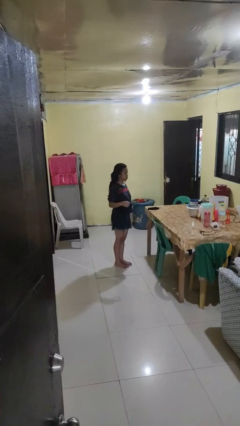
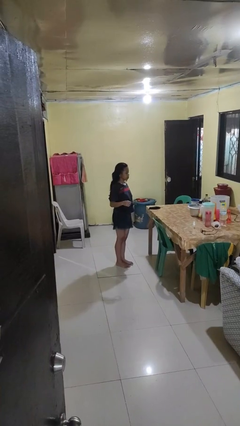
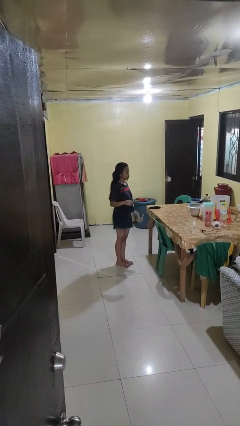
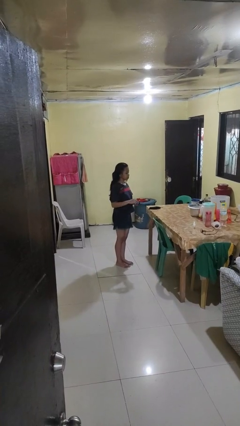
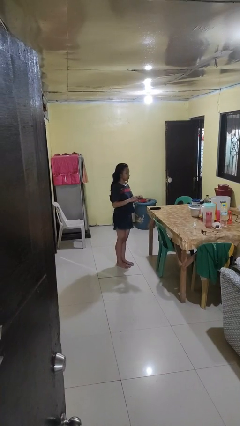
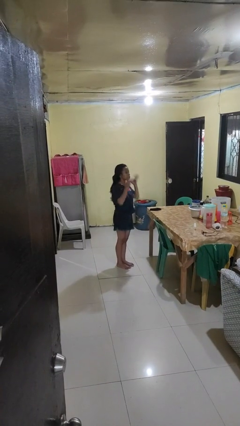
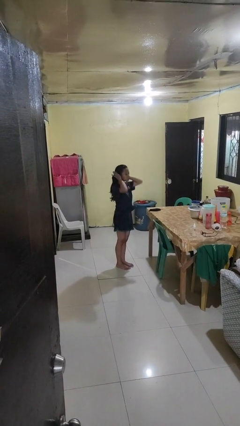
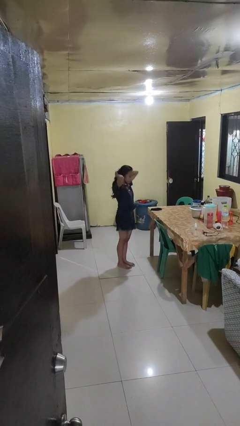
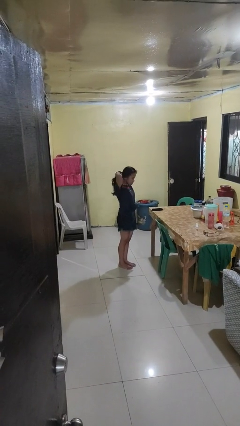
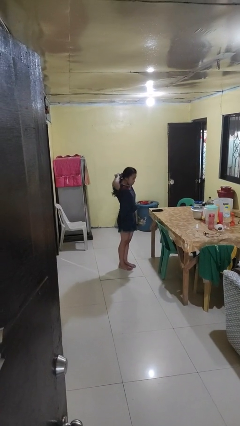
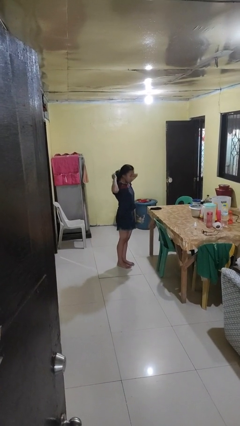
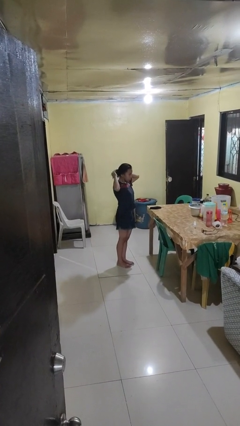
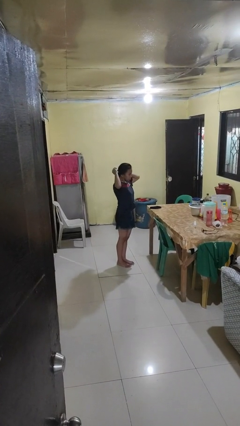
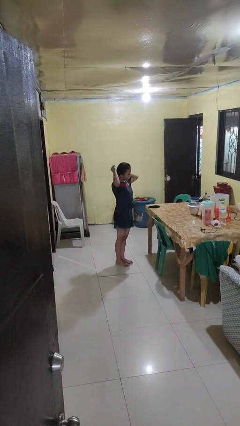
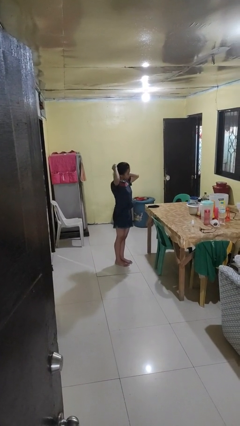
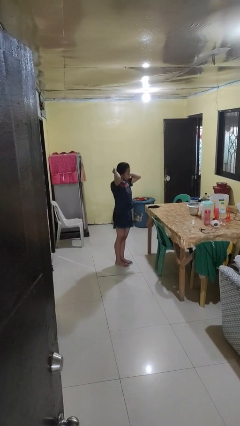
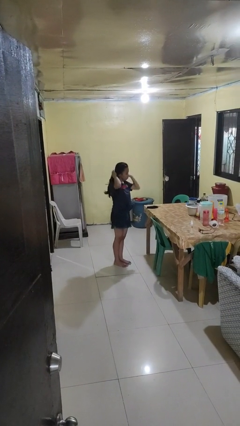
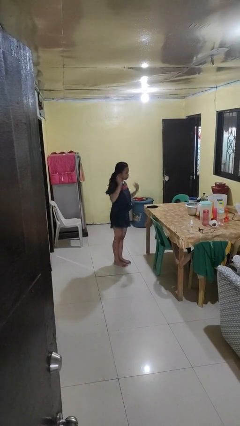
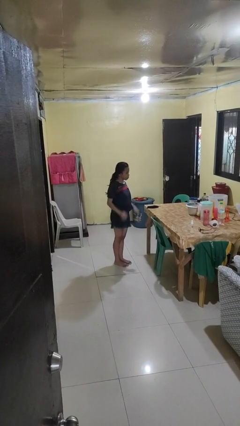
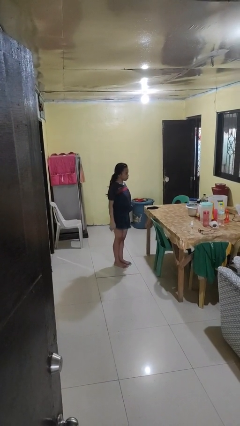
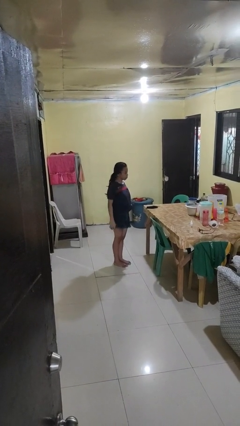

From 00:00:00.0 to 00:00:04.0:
person puts hair in ponytail

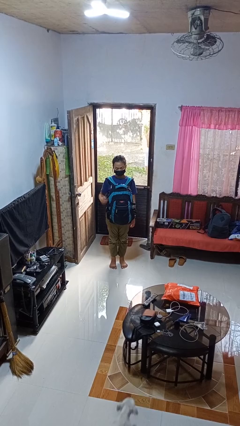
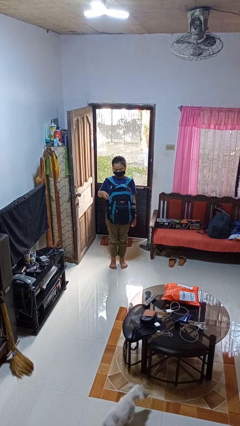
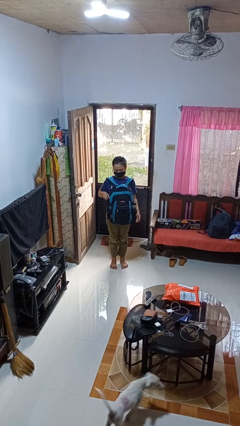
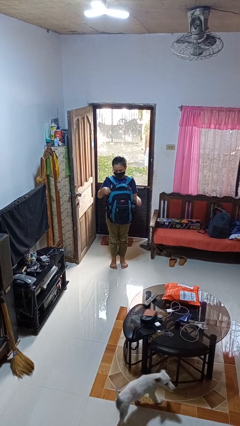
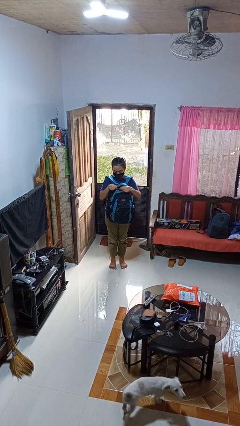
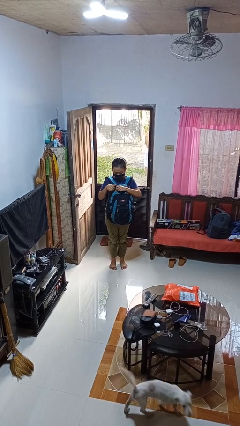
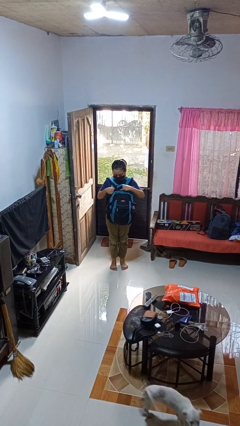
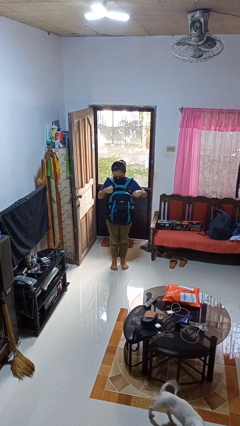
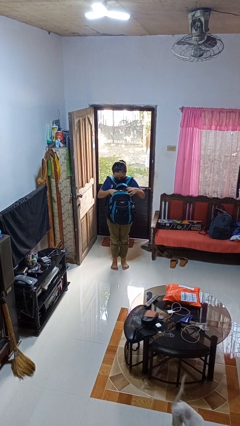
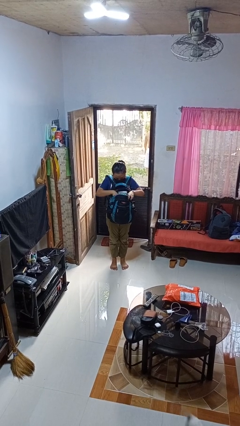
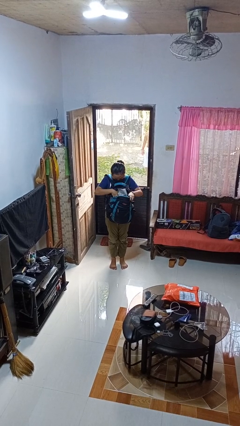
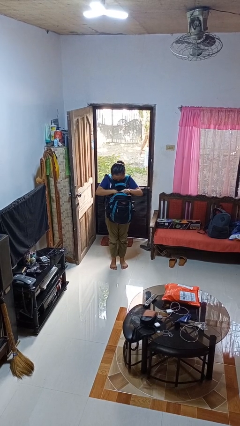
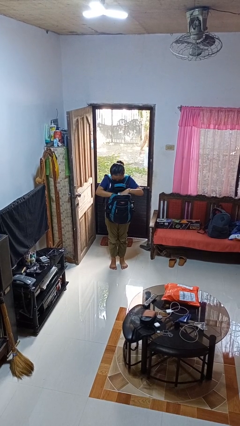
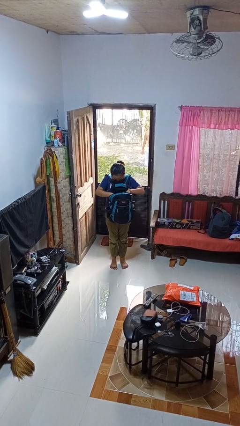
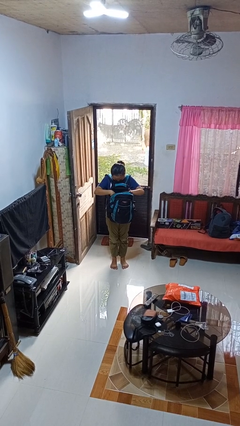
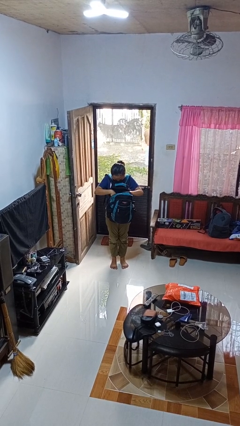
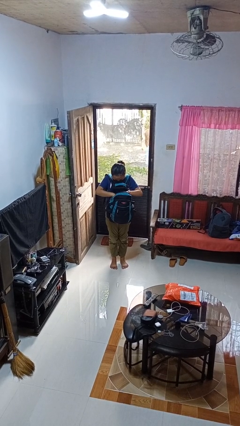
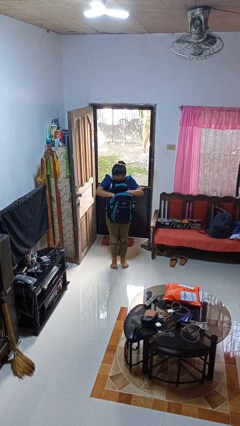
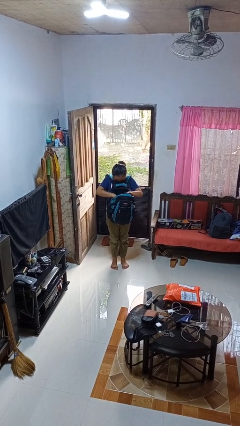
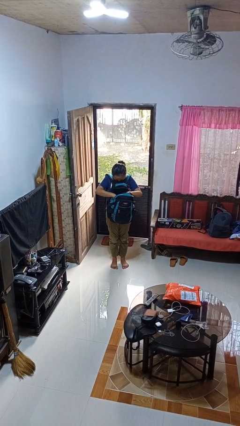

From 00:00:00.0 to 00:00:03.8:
person searches in backpack

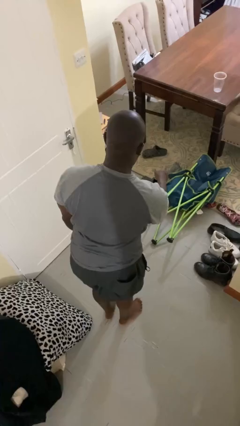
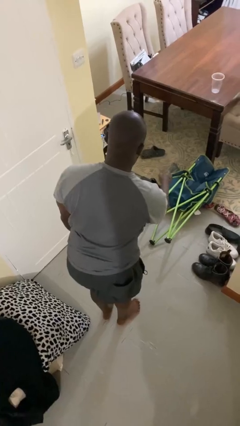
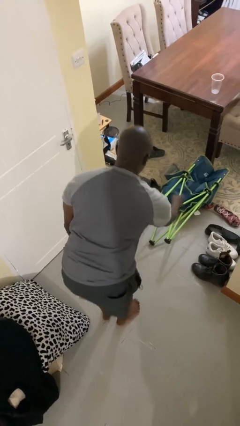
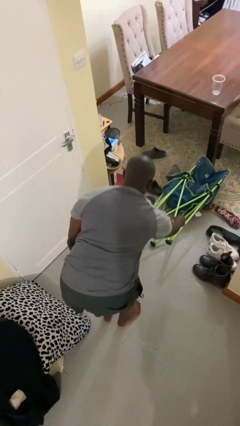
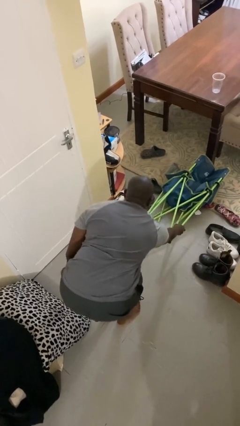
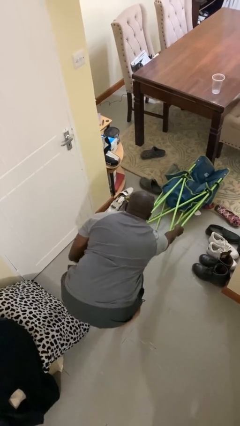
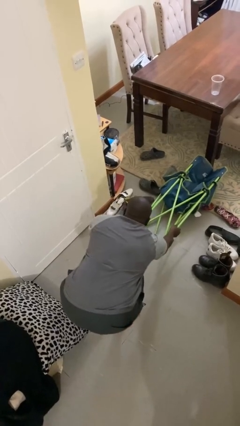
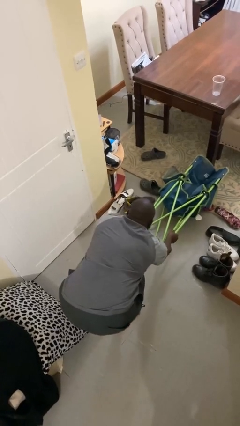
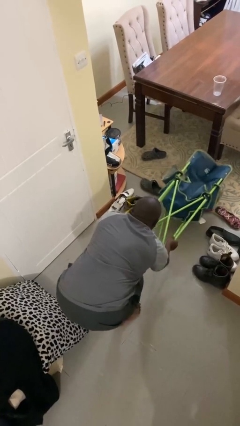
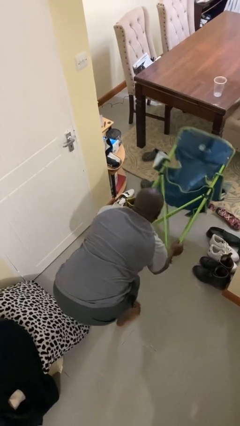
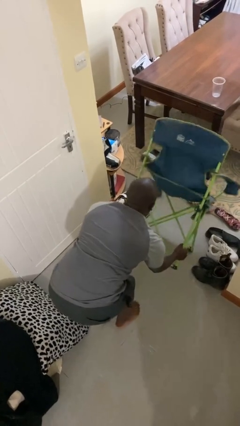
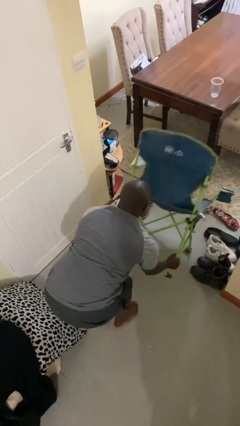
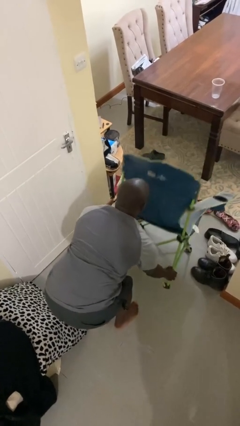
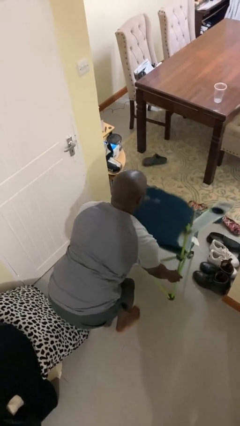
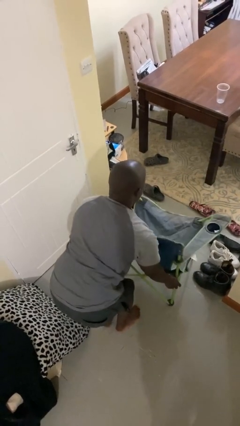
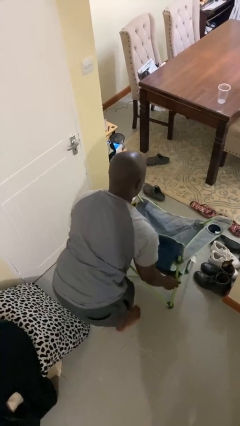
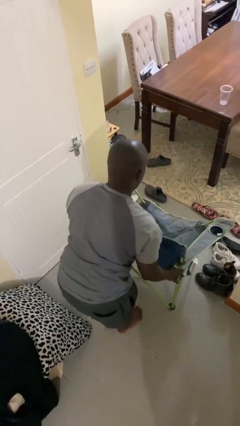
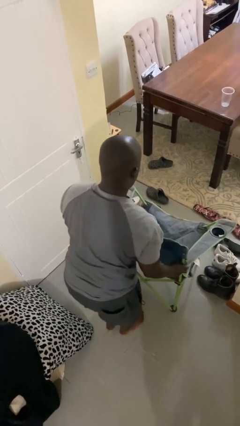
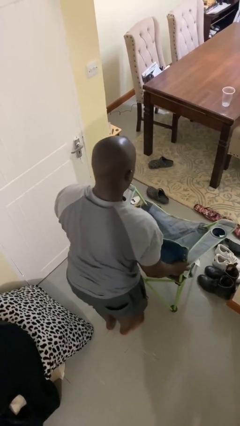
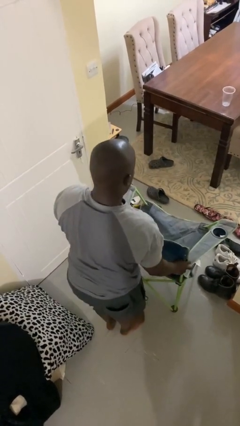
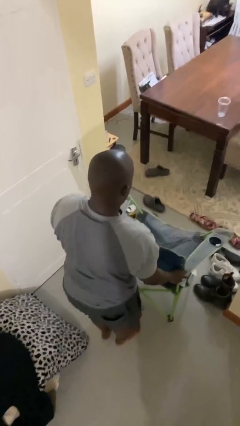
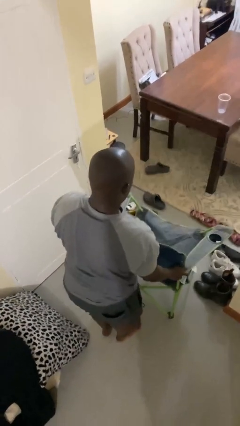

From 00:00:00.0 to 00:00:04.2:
person sets upright furniture

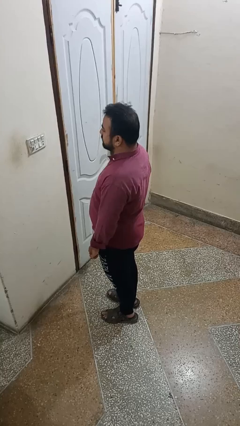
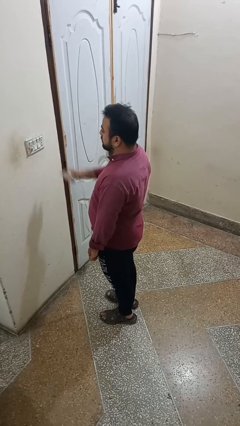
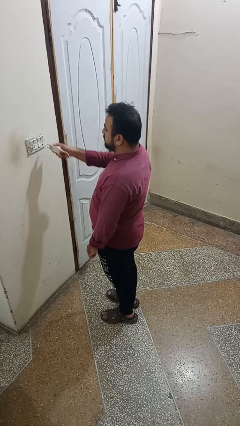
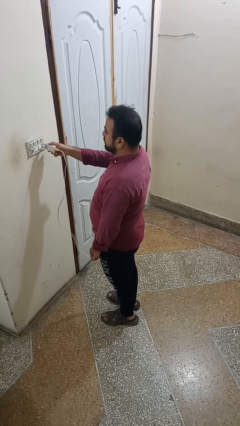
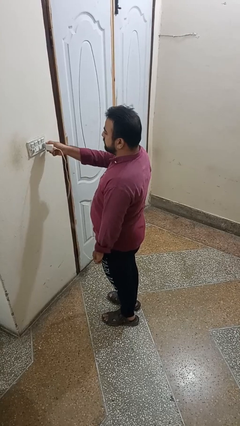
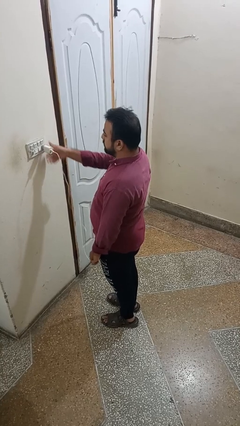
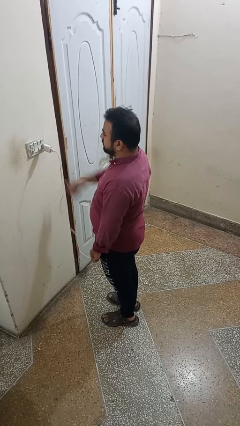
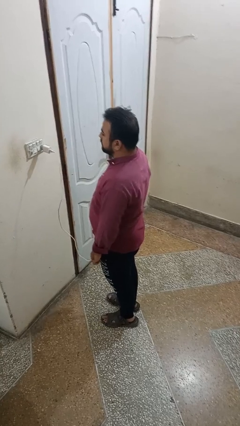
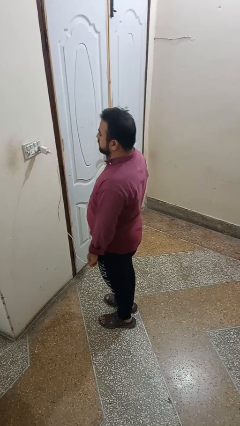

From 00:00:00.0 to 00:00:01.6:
person plugs into electrical socket

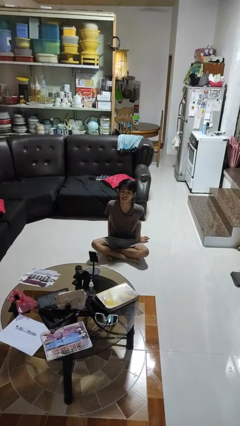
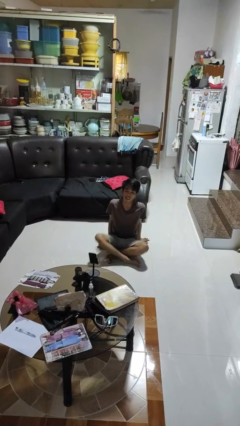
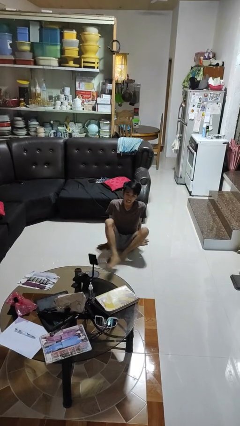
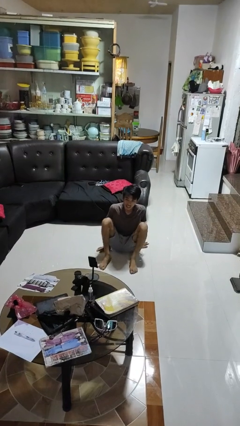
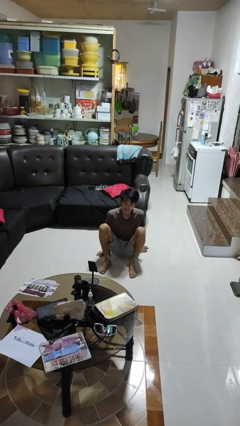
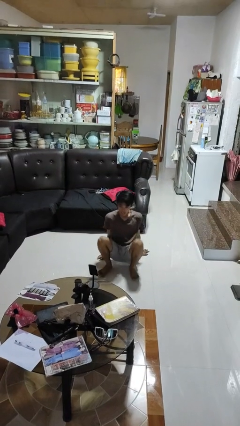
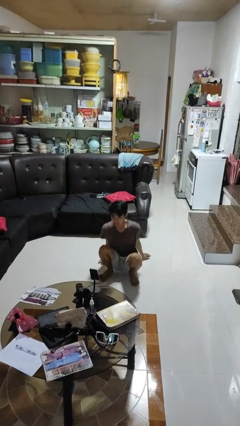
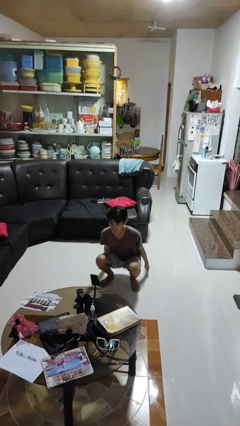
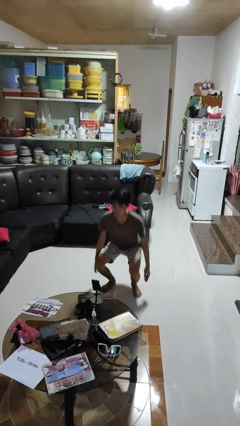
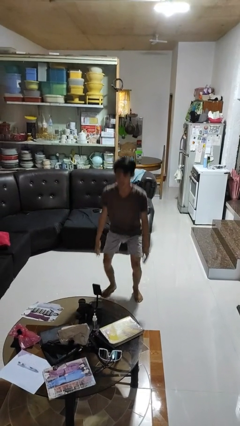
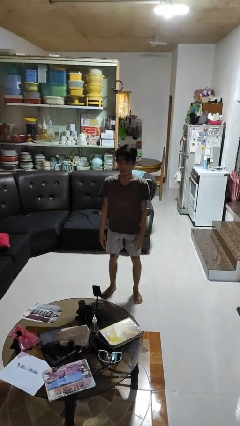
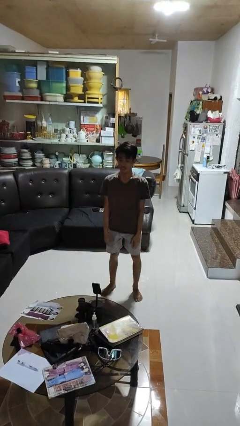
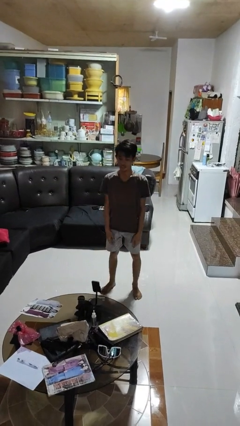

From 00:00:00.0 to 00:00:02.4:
person stands up from floor

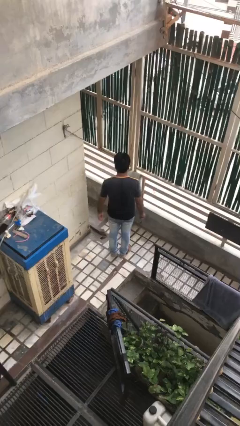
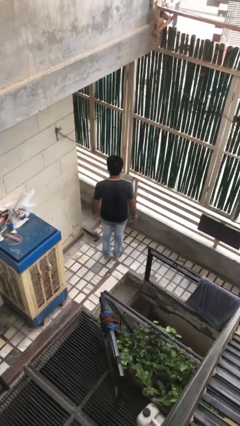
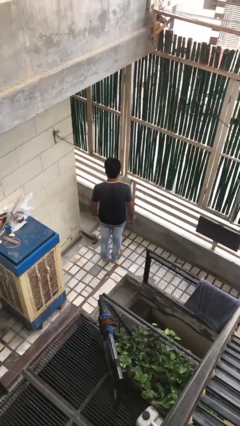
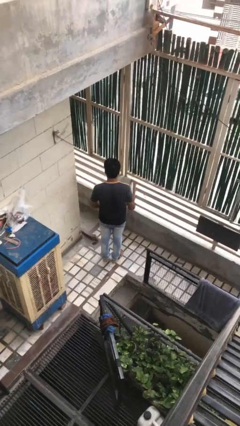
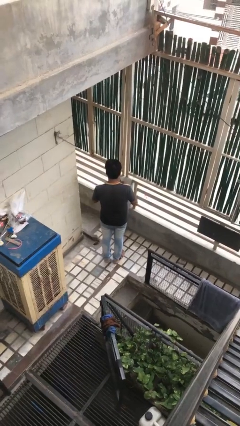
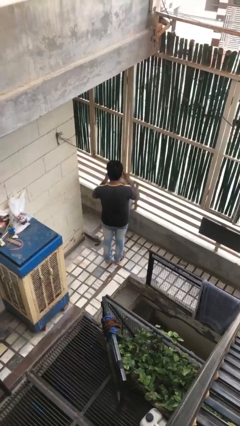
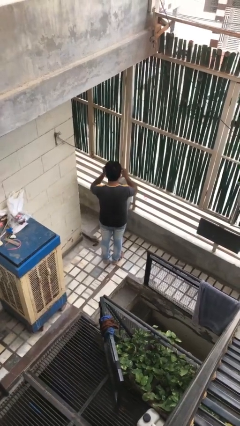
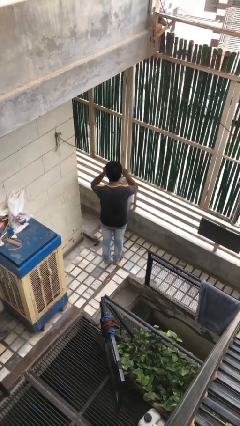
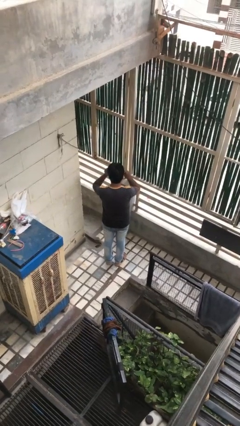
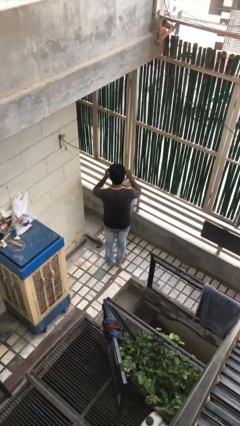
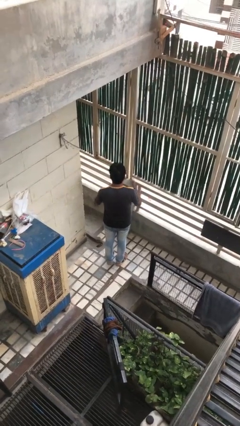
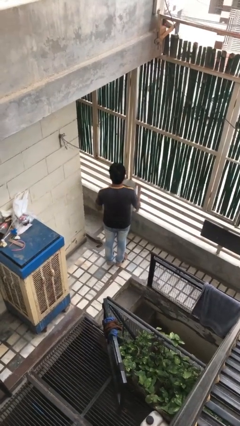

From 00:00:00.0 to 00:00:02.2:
person puts on glasses
